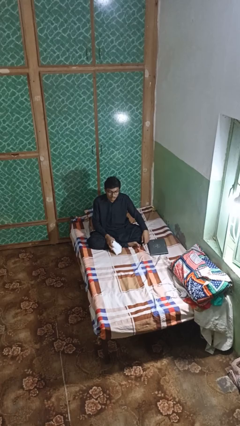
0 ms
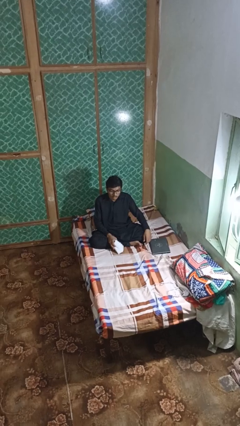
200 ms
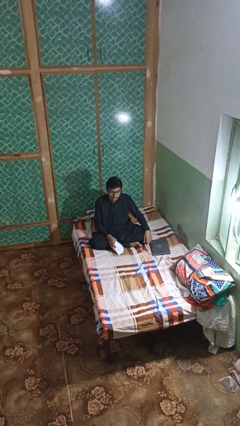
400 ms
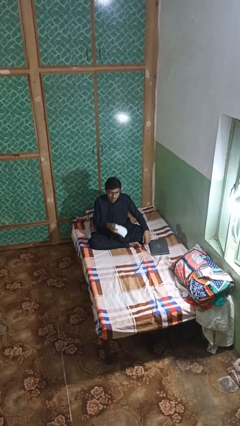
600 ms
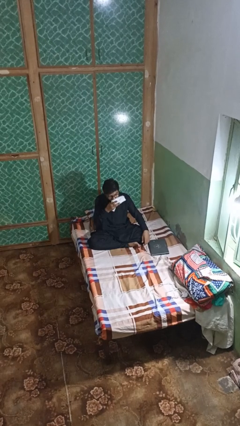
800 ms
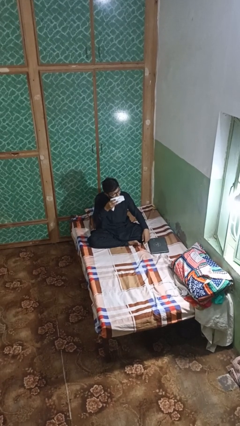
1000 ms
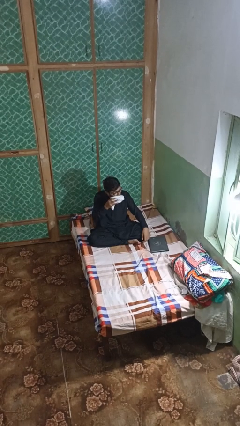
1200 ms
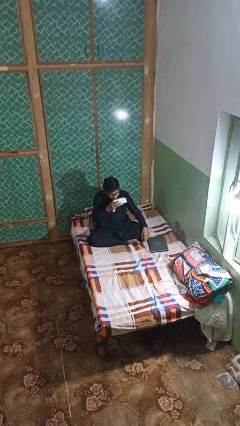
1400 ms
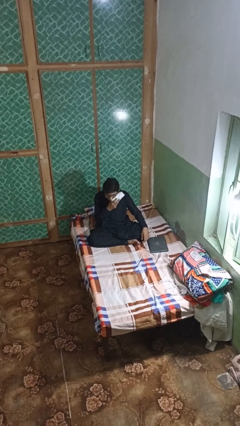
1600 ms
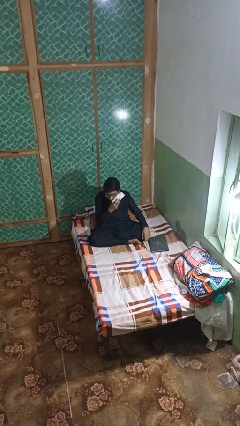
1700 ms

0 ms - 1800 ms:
person wipes mouth with napkin

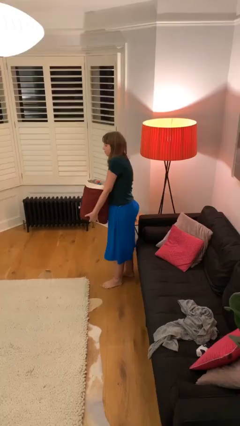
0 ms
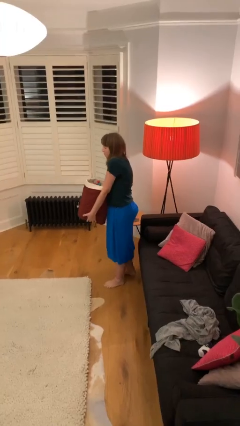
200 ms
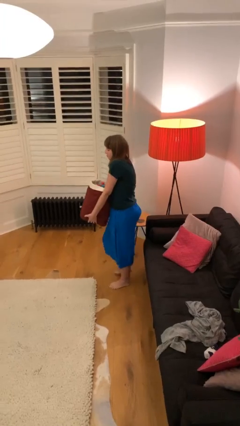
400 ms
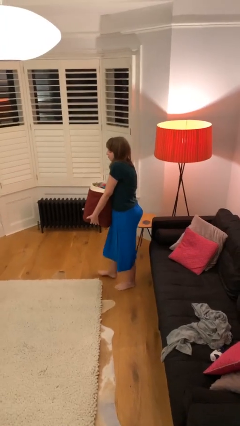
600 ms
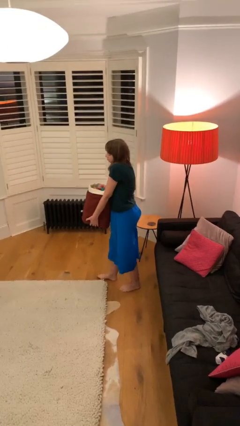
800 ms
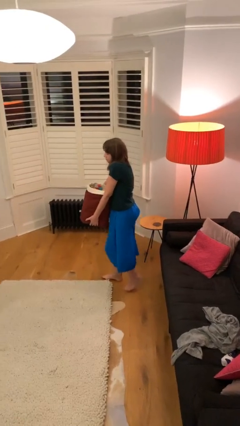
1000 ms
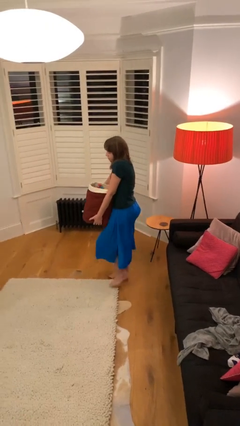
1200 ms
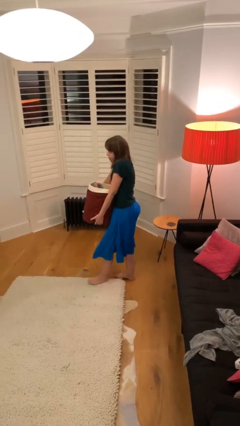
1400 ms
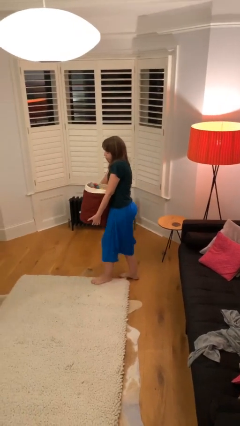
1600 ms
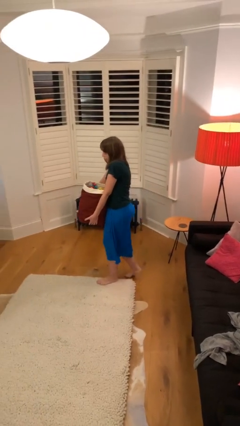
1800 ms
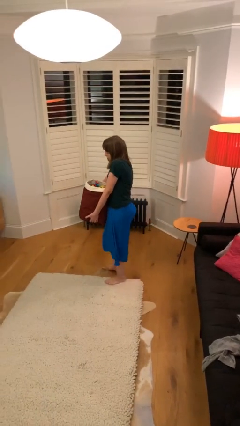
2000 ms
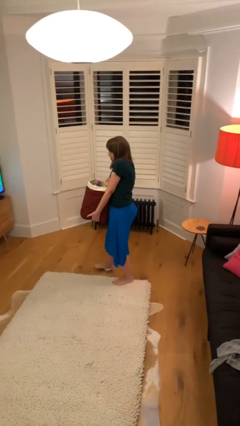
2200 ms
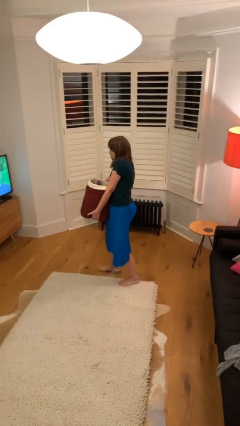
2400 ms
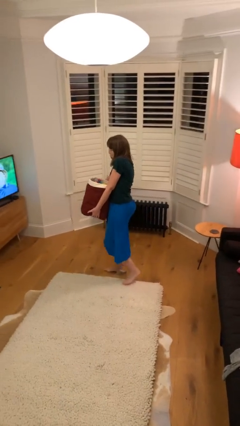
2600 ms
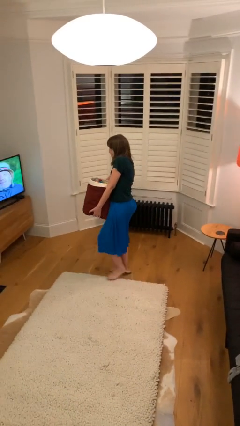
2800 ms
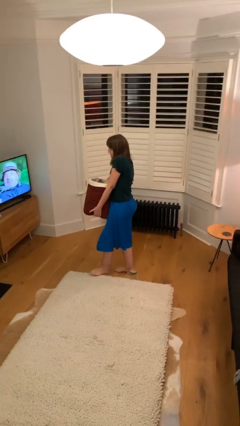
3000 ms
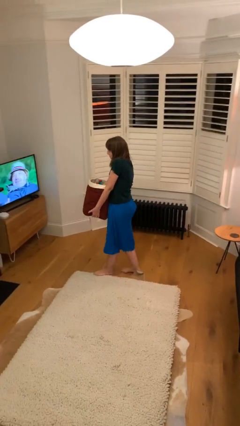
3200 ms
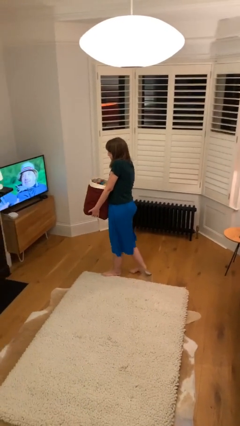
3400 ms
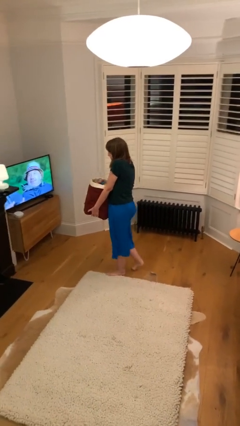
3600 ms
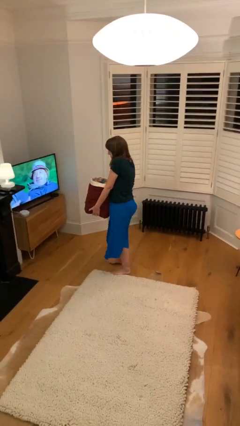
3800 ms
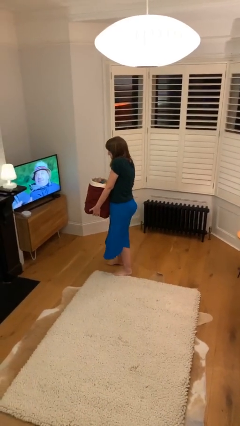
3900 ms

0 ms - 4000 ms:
person carries heavy object

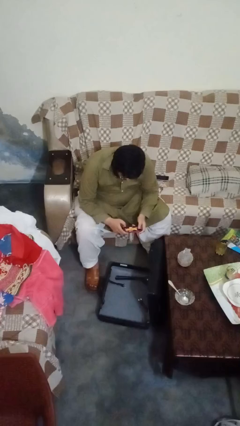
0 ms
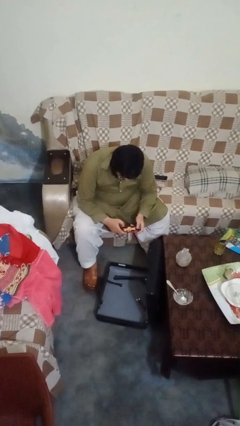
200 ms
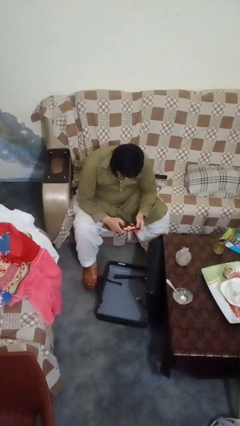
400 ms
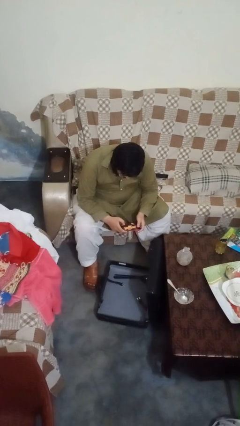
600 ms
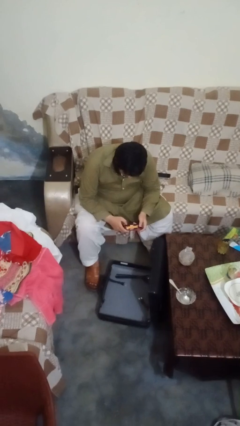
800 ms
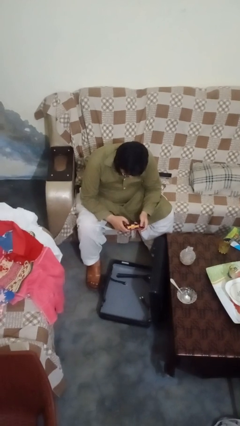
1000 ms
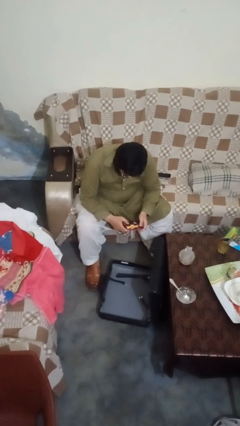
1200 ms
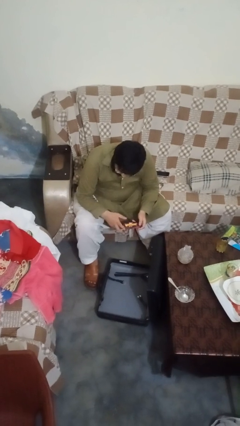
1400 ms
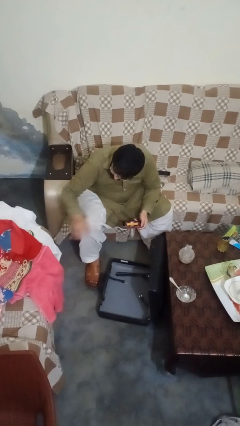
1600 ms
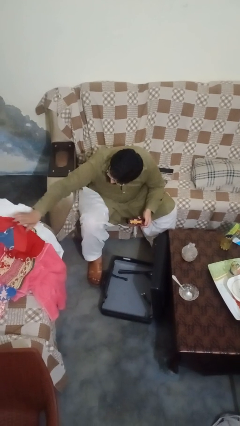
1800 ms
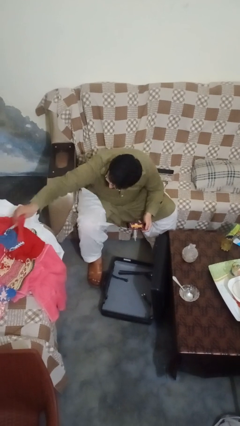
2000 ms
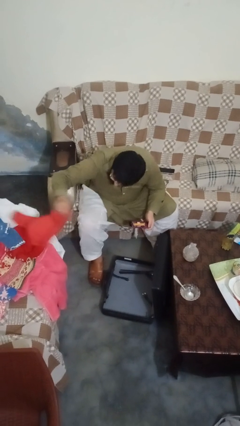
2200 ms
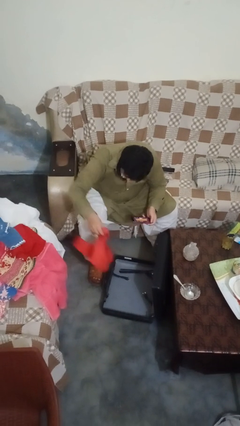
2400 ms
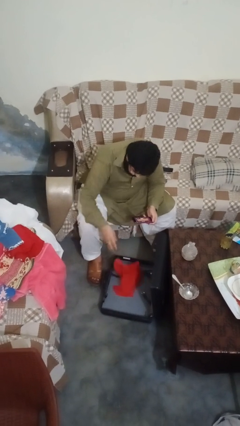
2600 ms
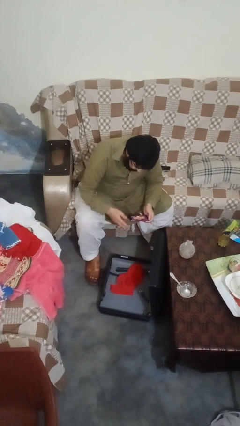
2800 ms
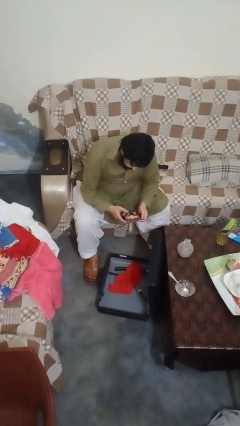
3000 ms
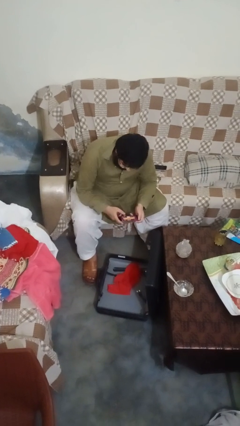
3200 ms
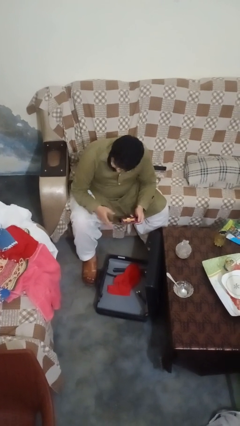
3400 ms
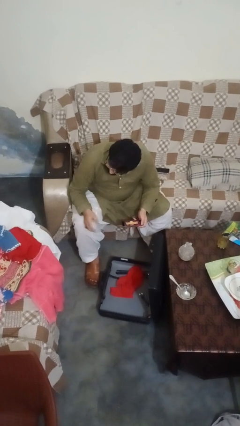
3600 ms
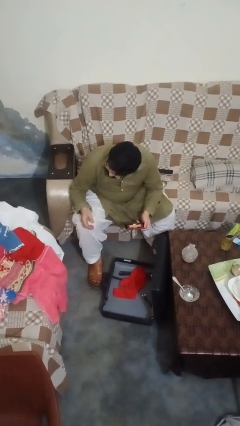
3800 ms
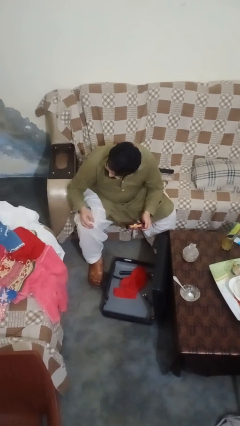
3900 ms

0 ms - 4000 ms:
person loads clothes into suitcase

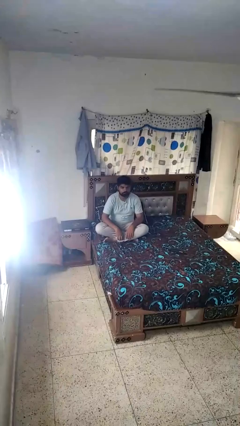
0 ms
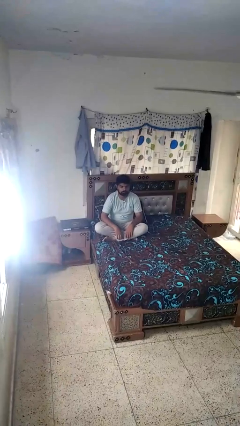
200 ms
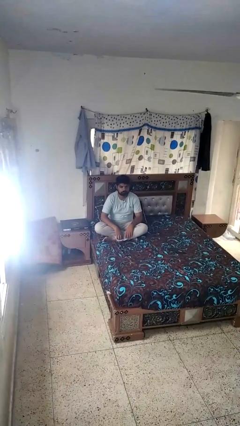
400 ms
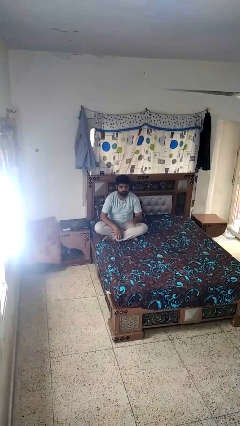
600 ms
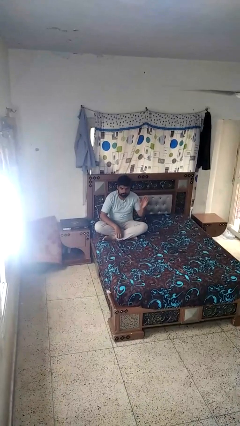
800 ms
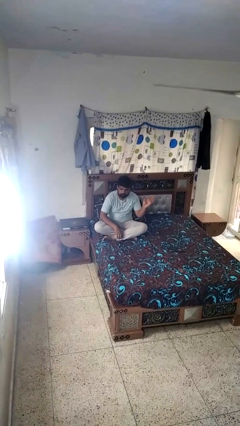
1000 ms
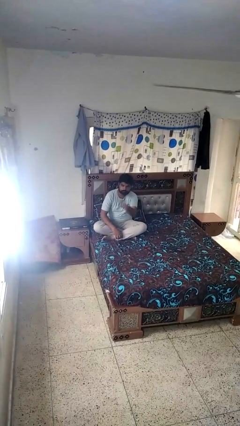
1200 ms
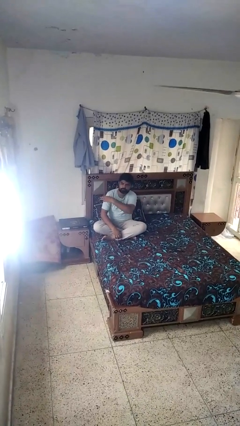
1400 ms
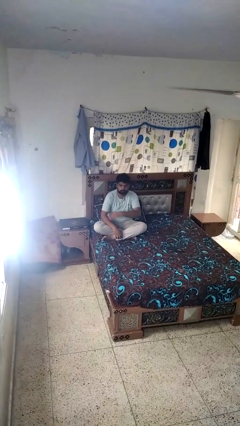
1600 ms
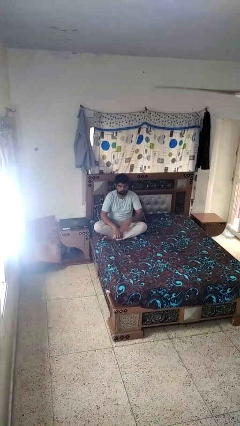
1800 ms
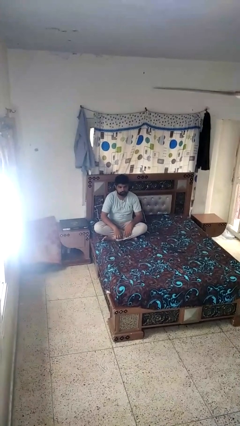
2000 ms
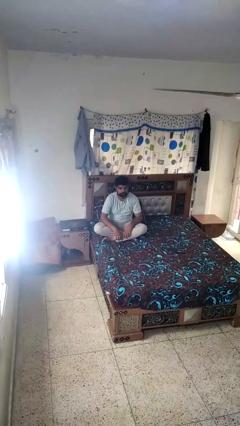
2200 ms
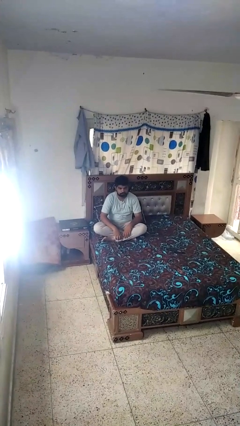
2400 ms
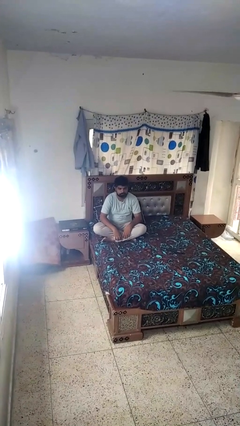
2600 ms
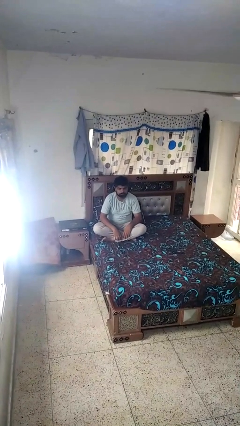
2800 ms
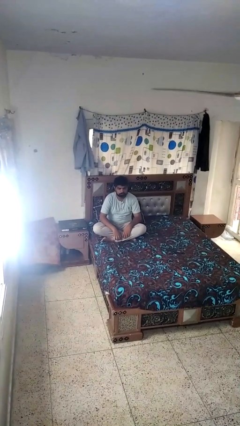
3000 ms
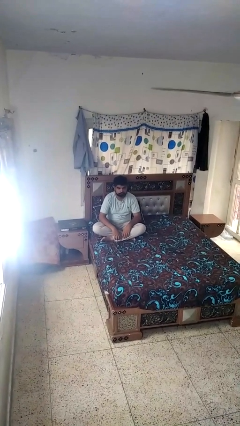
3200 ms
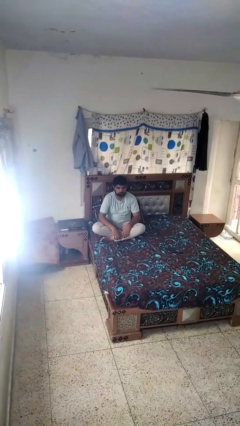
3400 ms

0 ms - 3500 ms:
person gestures swipe right

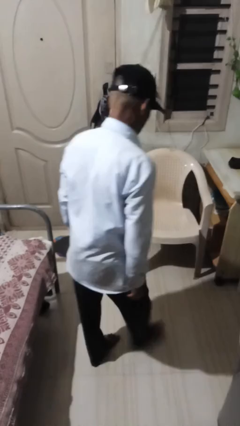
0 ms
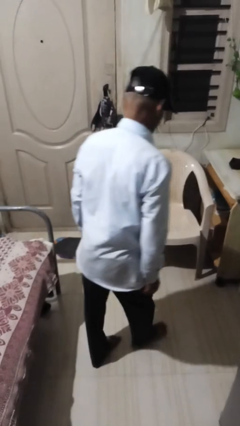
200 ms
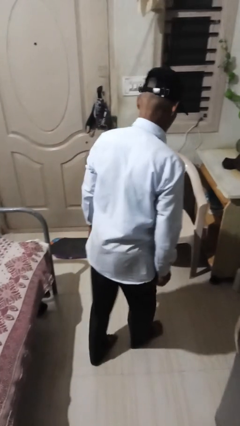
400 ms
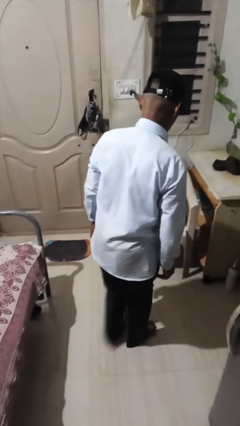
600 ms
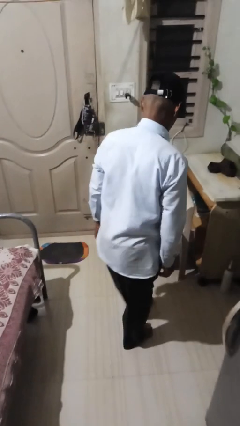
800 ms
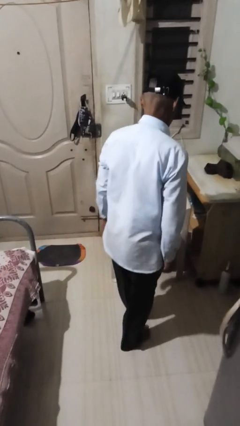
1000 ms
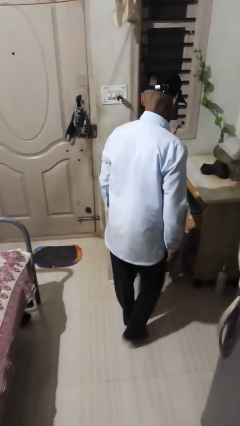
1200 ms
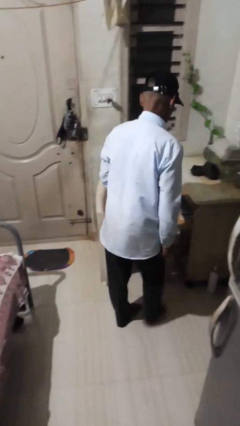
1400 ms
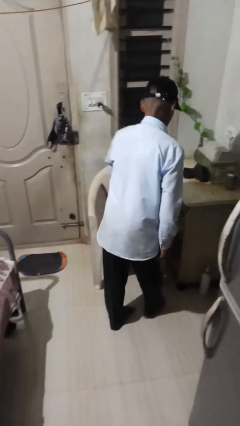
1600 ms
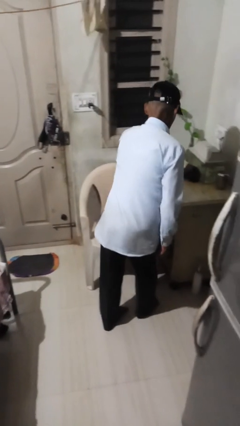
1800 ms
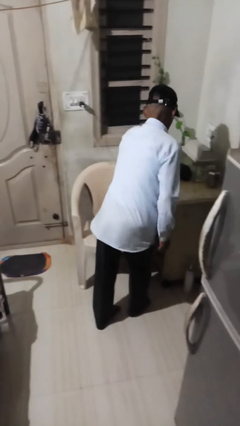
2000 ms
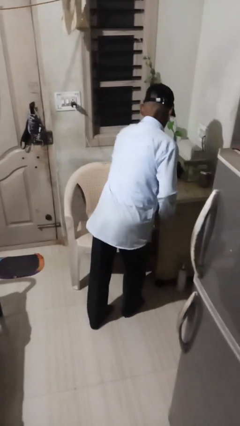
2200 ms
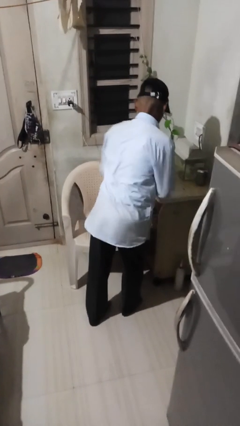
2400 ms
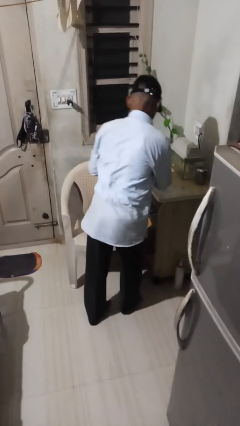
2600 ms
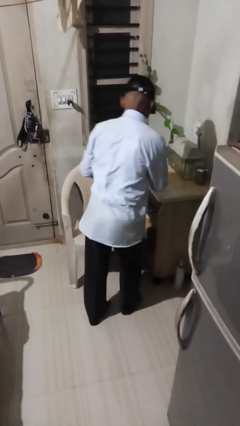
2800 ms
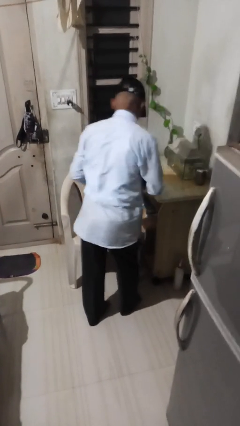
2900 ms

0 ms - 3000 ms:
person picks up object from table

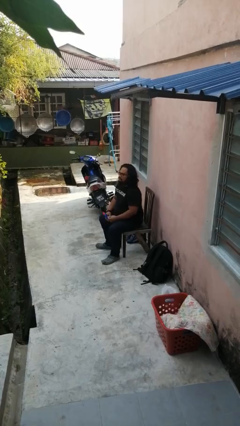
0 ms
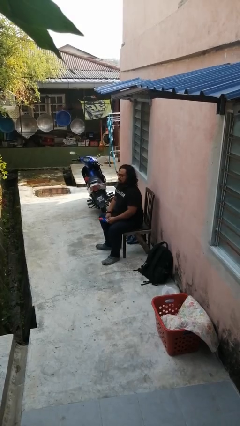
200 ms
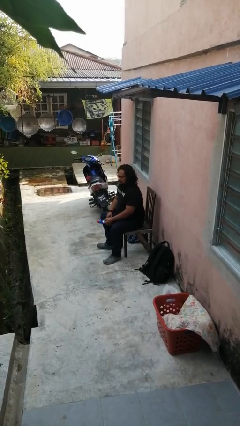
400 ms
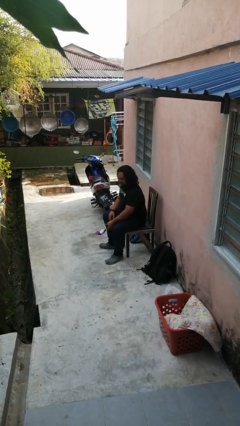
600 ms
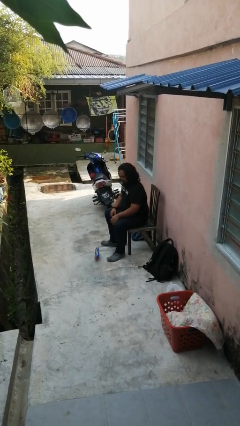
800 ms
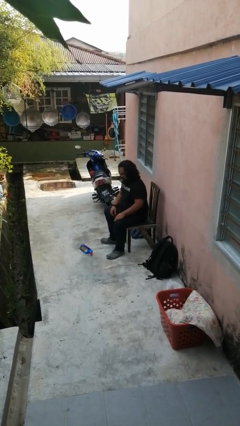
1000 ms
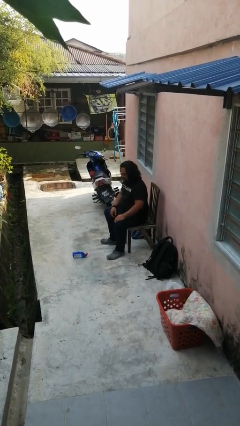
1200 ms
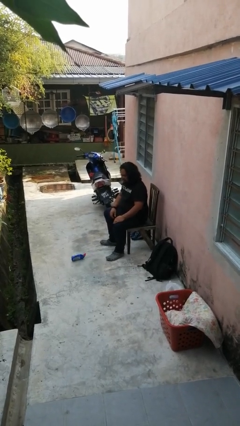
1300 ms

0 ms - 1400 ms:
person drops object
